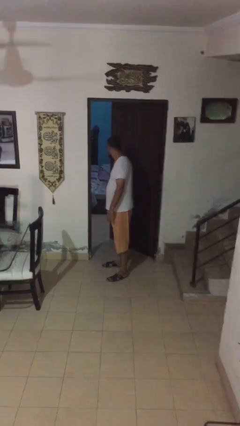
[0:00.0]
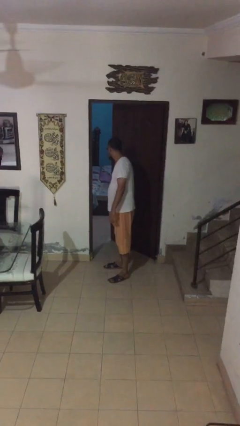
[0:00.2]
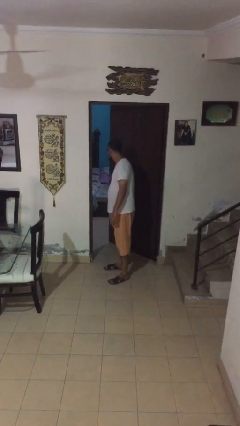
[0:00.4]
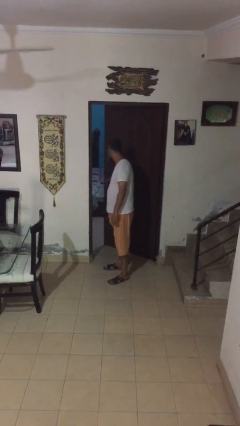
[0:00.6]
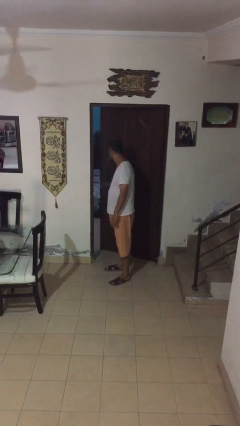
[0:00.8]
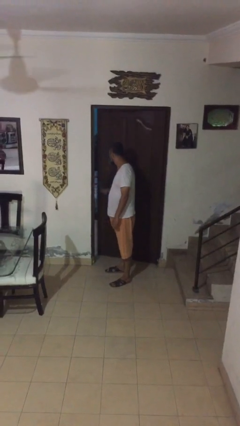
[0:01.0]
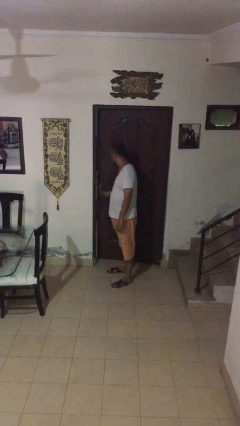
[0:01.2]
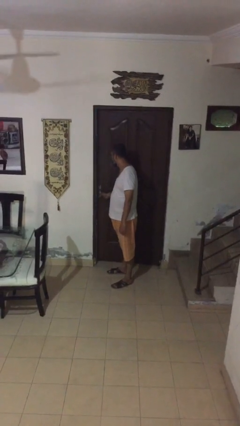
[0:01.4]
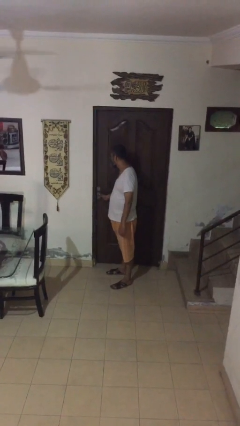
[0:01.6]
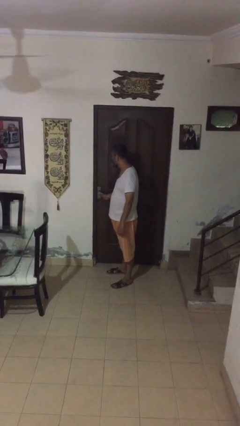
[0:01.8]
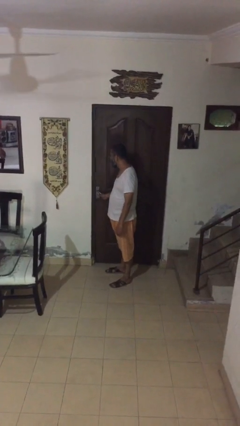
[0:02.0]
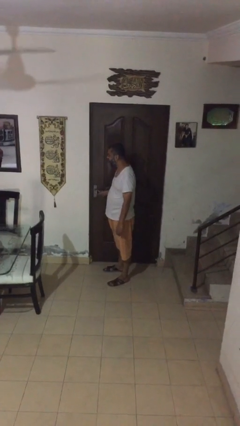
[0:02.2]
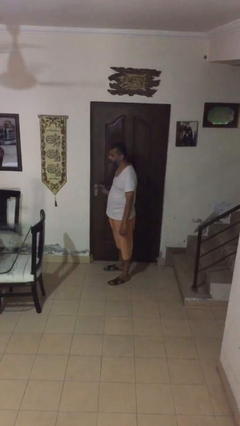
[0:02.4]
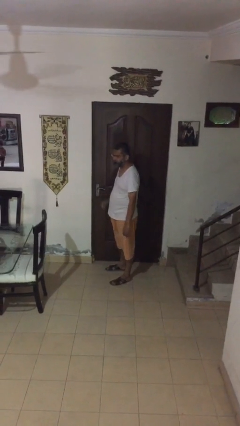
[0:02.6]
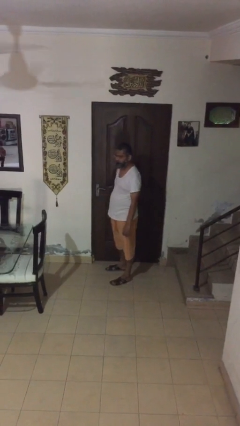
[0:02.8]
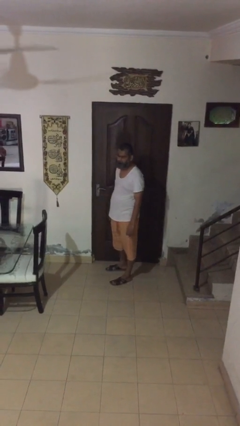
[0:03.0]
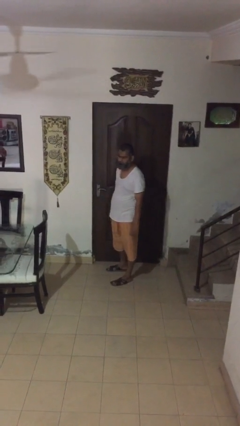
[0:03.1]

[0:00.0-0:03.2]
person closes facility door

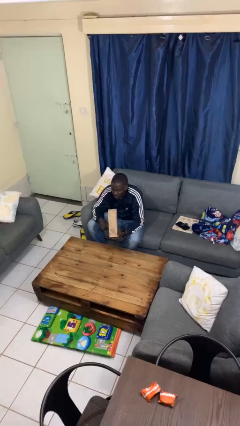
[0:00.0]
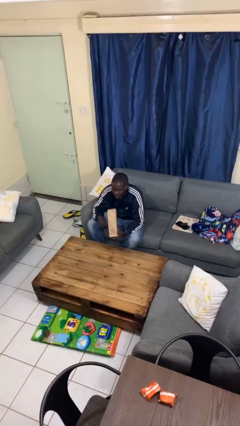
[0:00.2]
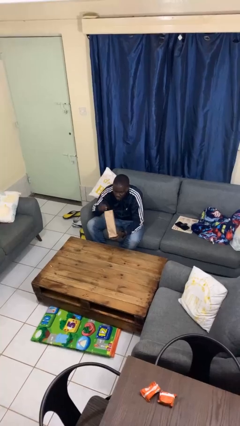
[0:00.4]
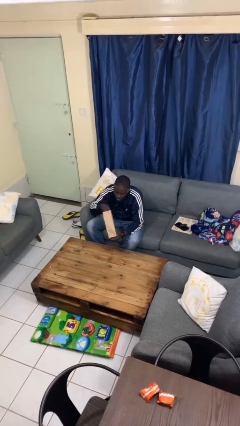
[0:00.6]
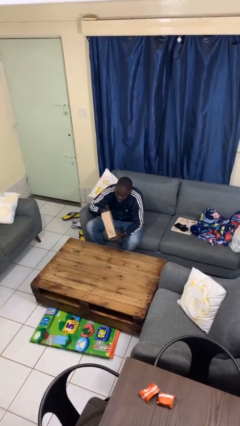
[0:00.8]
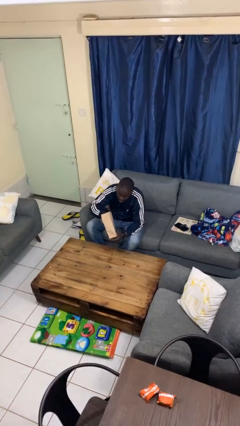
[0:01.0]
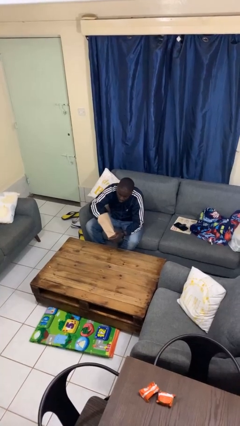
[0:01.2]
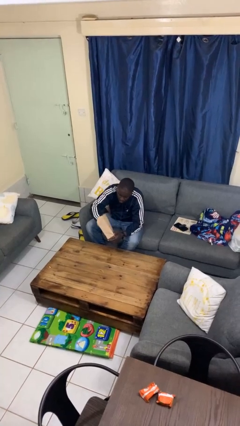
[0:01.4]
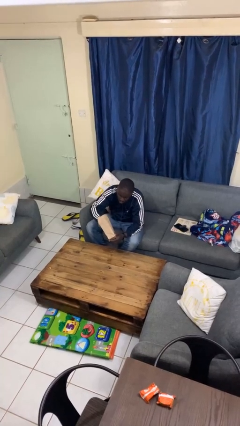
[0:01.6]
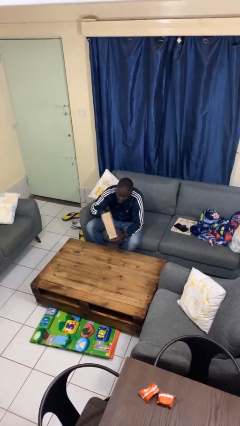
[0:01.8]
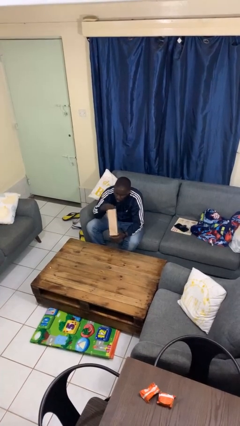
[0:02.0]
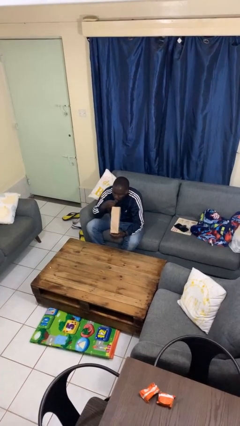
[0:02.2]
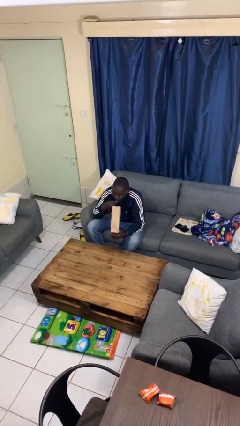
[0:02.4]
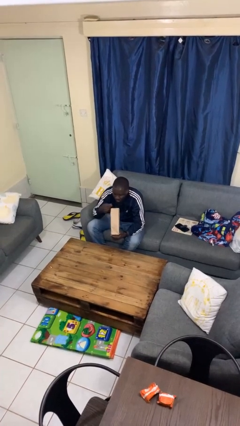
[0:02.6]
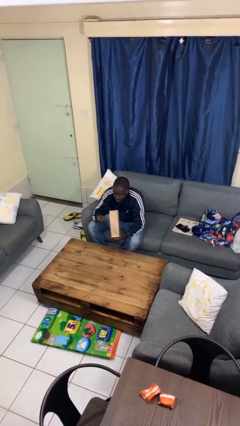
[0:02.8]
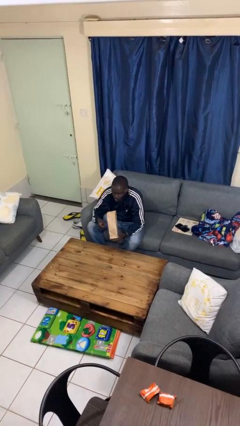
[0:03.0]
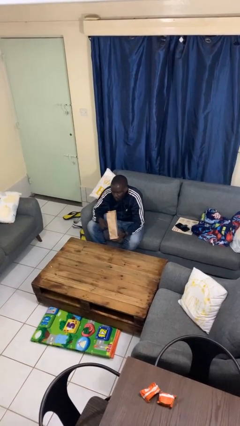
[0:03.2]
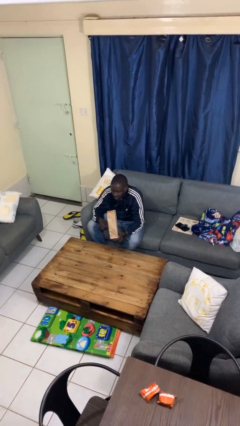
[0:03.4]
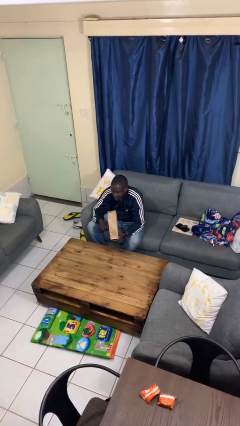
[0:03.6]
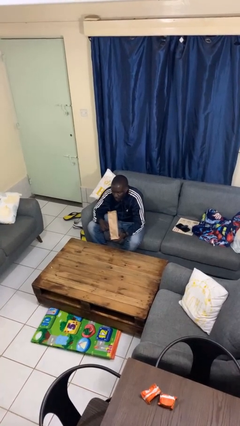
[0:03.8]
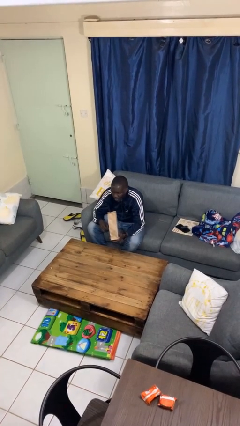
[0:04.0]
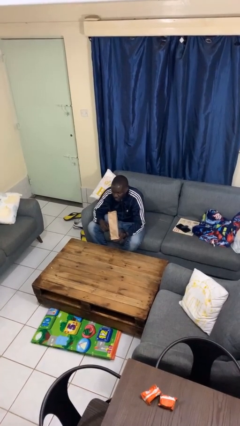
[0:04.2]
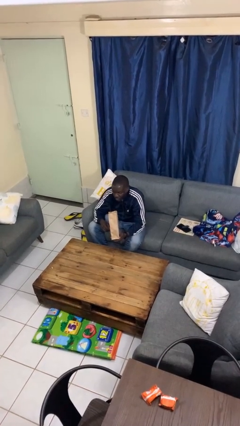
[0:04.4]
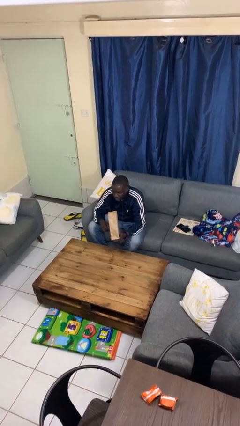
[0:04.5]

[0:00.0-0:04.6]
person eats snack from bag

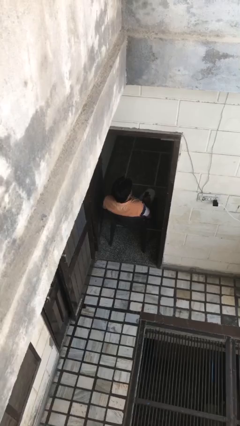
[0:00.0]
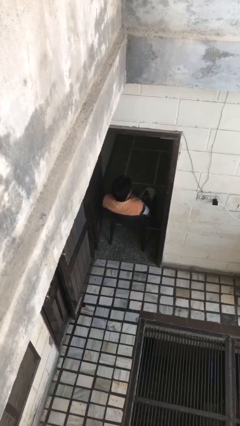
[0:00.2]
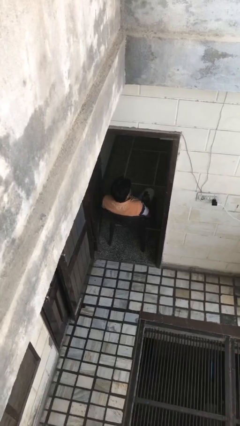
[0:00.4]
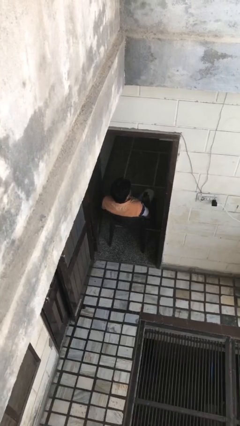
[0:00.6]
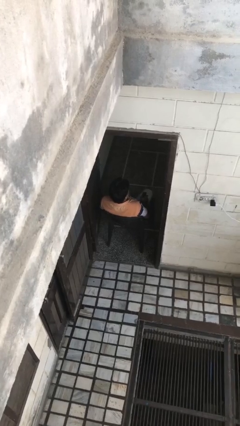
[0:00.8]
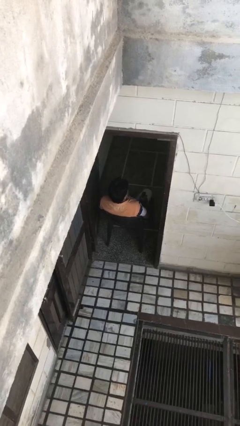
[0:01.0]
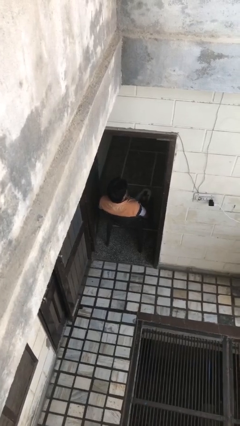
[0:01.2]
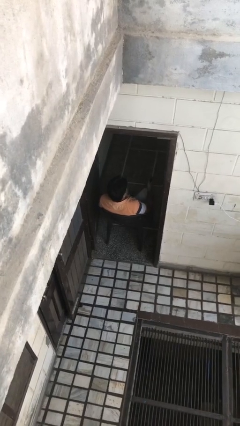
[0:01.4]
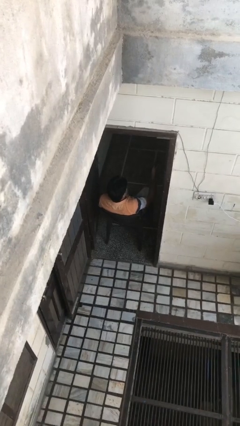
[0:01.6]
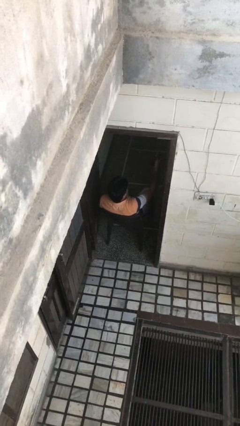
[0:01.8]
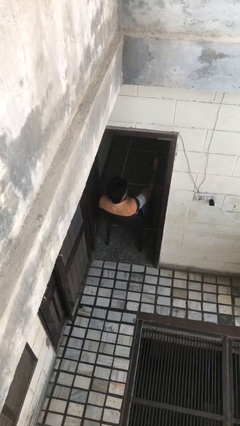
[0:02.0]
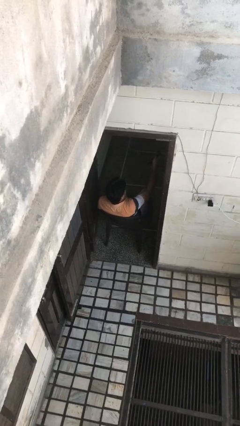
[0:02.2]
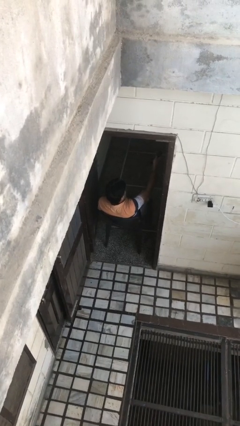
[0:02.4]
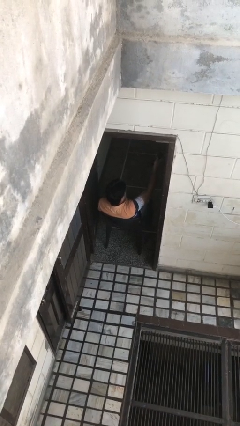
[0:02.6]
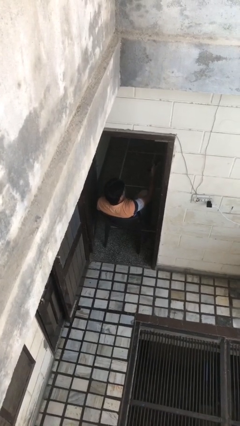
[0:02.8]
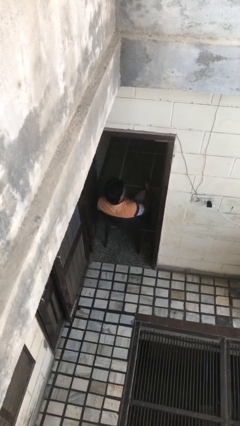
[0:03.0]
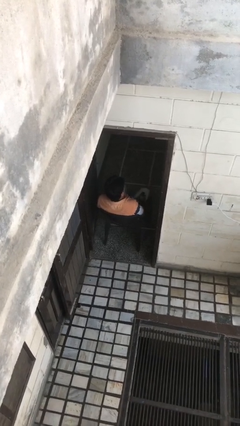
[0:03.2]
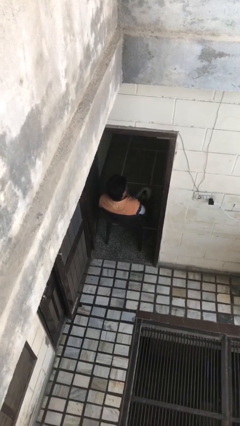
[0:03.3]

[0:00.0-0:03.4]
person uses television remote

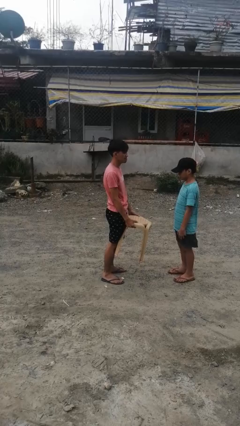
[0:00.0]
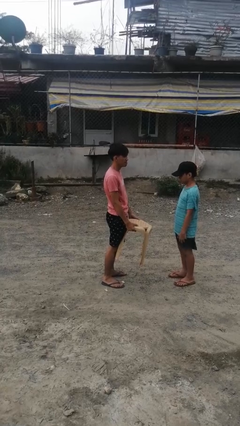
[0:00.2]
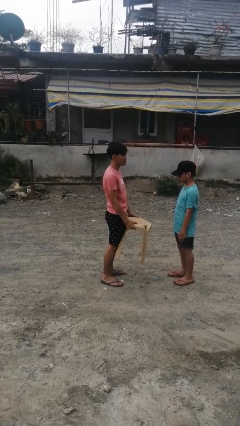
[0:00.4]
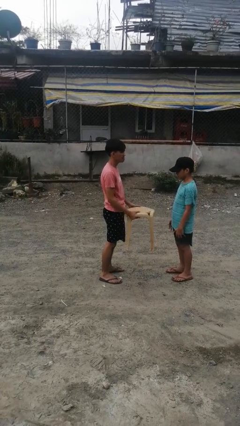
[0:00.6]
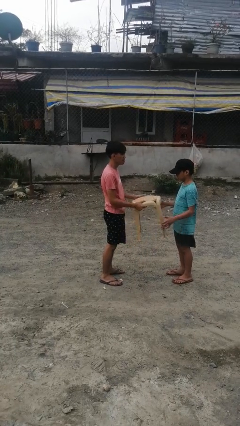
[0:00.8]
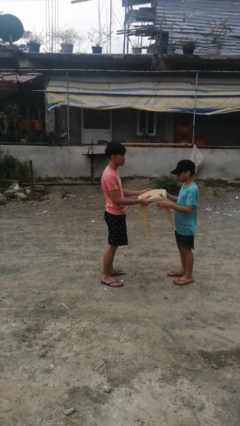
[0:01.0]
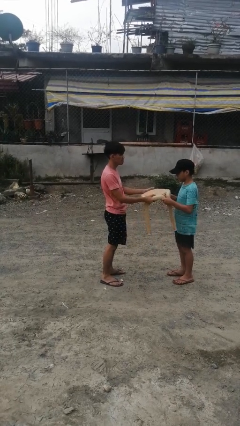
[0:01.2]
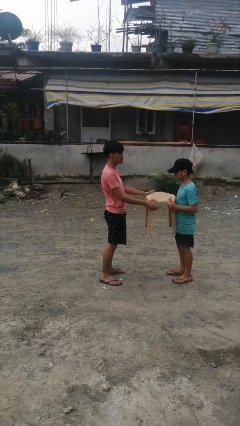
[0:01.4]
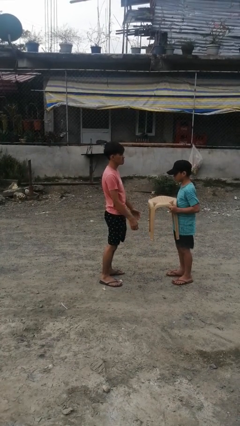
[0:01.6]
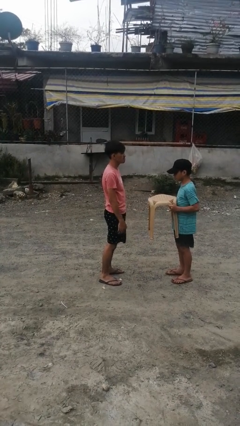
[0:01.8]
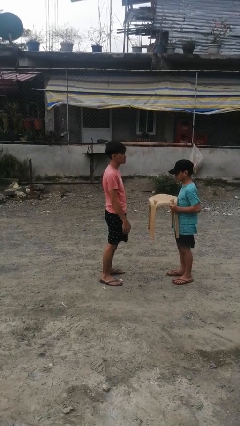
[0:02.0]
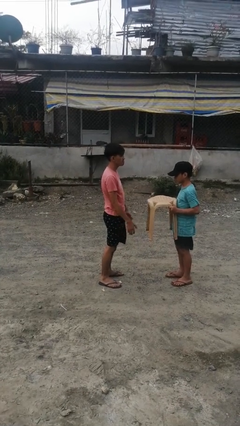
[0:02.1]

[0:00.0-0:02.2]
person transfers object to person

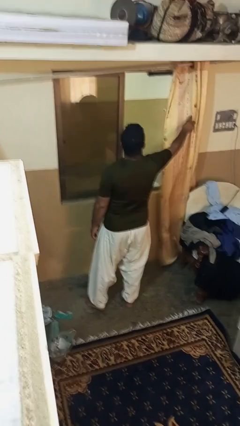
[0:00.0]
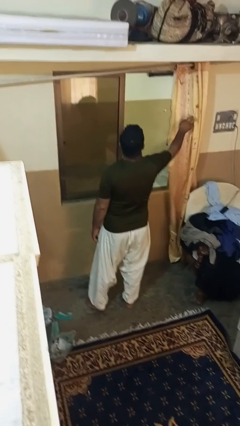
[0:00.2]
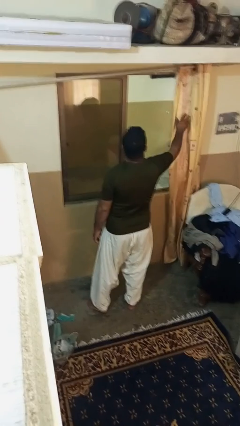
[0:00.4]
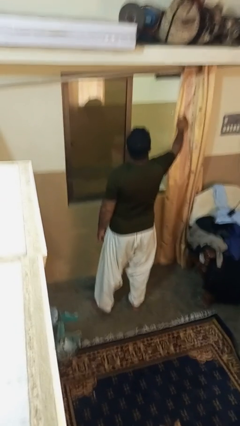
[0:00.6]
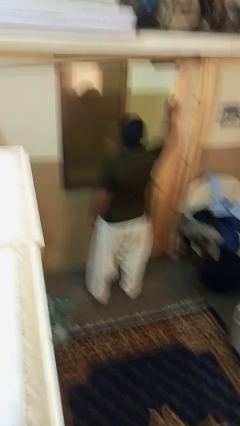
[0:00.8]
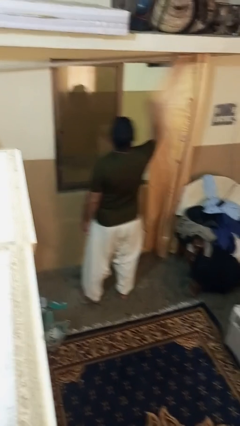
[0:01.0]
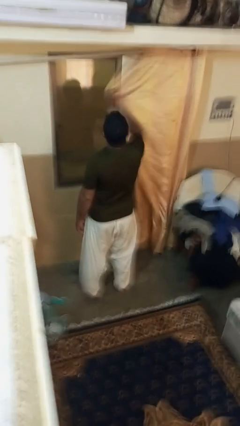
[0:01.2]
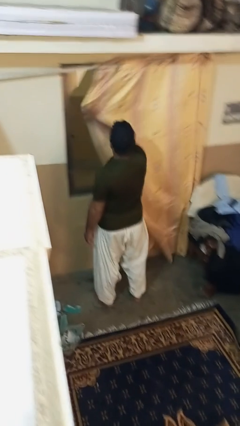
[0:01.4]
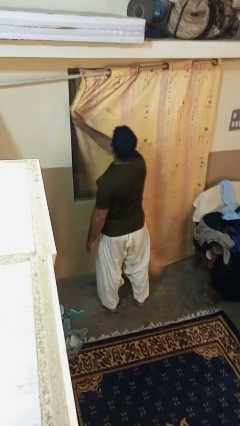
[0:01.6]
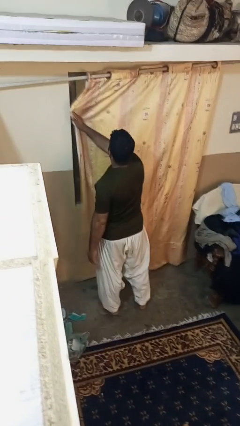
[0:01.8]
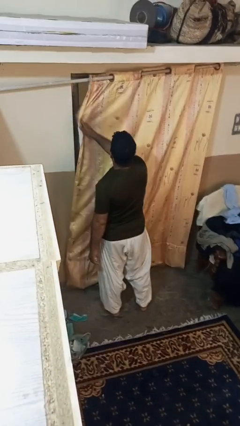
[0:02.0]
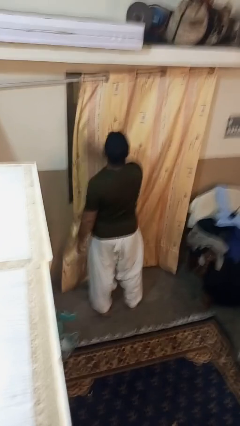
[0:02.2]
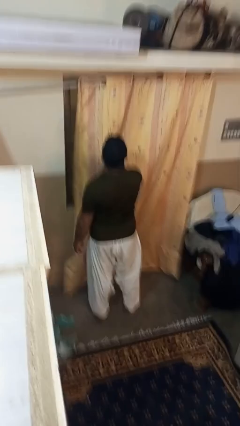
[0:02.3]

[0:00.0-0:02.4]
person closes curtains

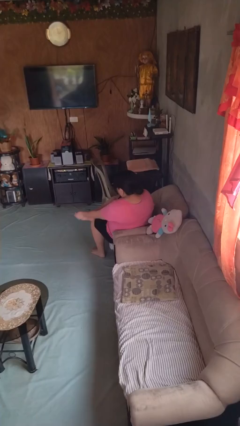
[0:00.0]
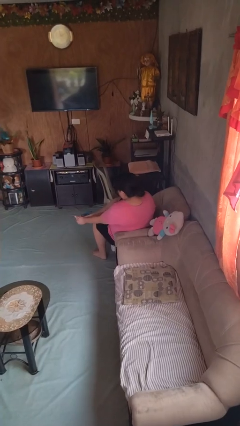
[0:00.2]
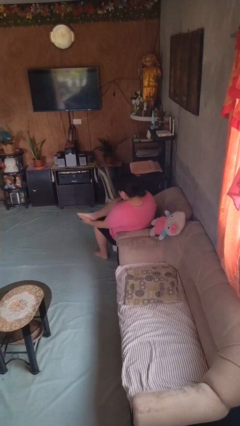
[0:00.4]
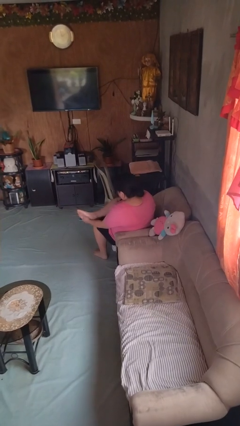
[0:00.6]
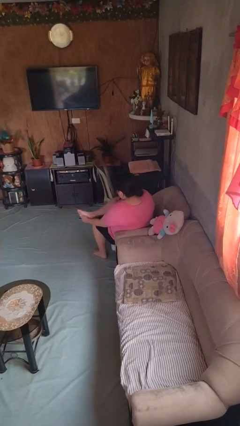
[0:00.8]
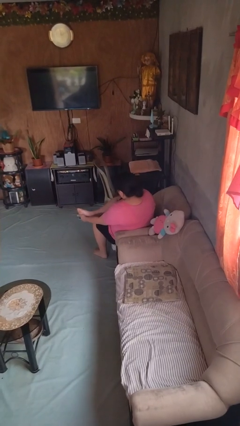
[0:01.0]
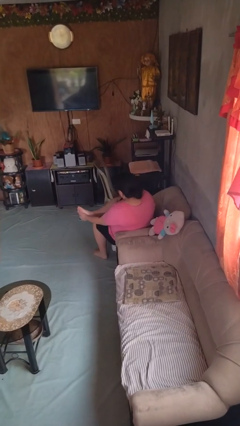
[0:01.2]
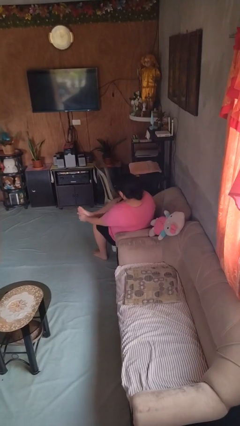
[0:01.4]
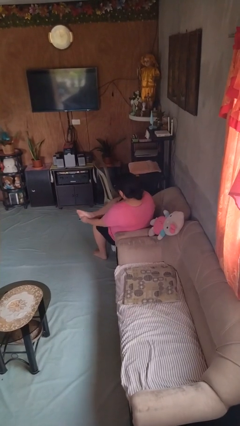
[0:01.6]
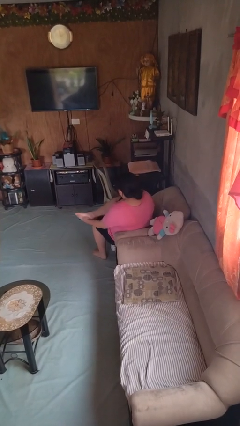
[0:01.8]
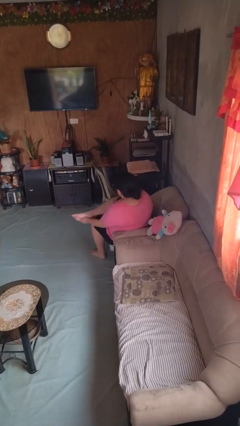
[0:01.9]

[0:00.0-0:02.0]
person rubs foot
